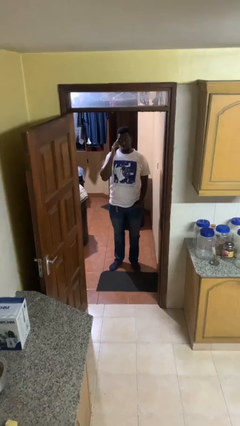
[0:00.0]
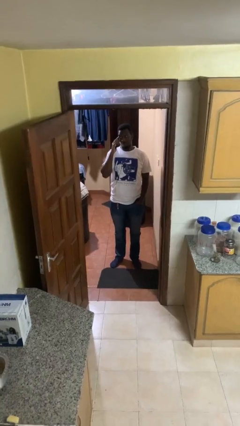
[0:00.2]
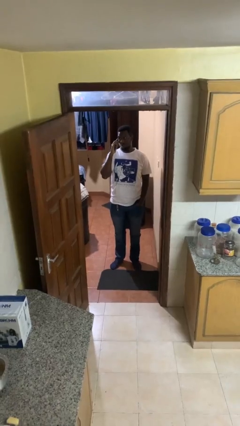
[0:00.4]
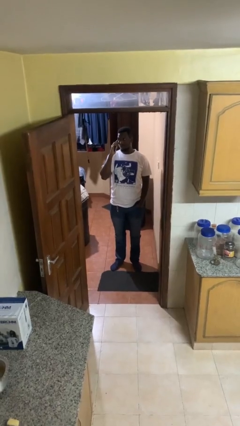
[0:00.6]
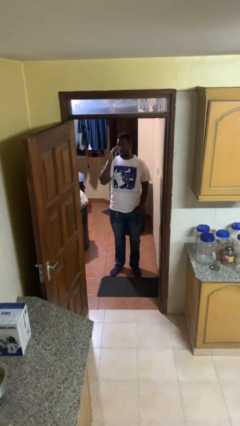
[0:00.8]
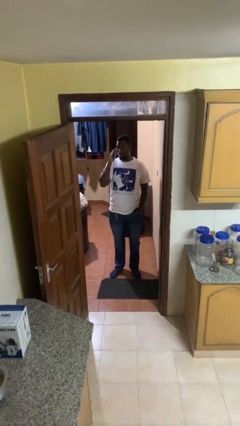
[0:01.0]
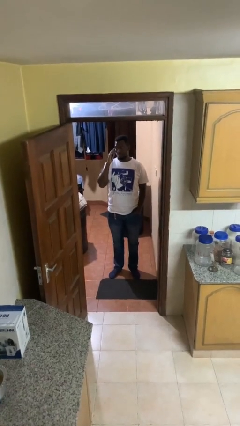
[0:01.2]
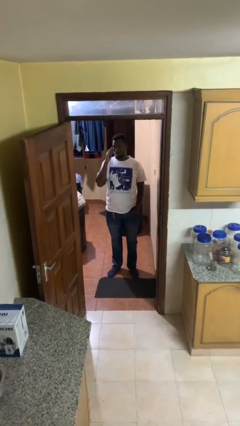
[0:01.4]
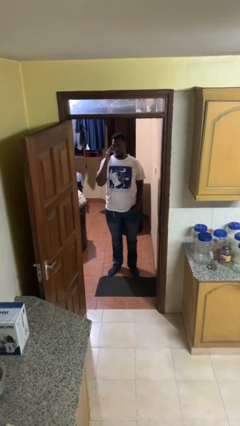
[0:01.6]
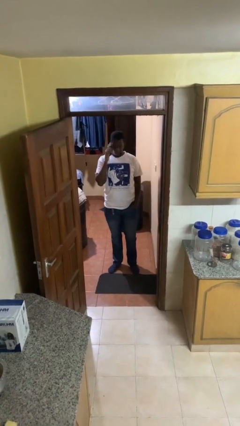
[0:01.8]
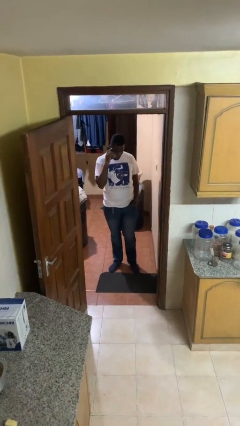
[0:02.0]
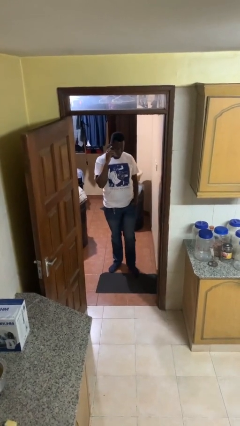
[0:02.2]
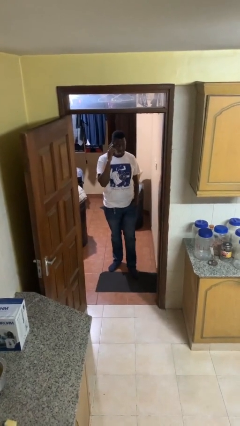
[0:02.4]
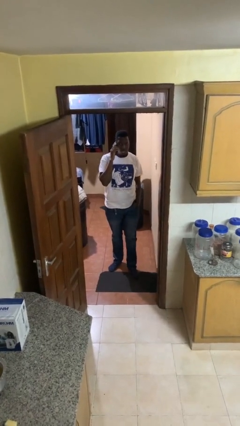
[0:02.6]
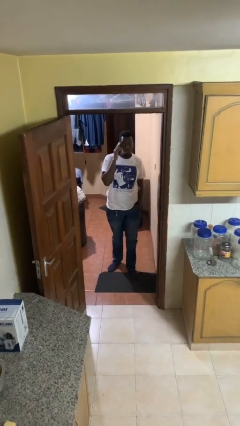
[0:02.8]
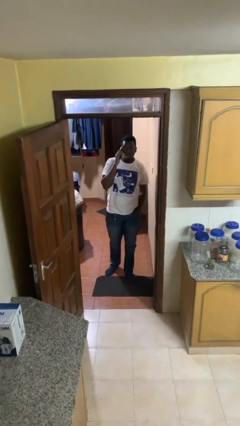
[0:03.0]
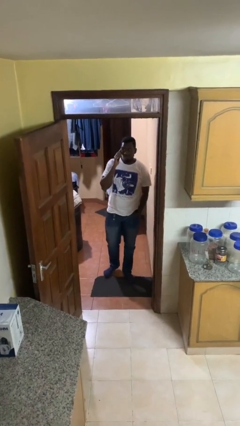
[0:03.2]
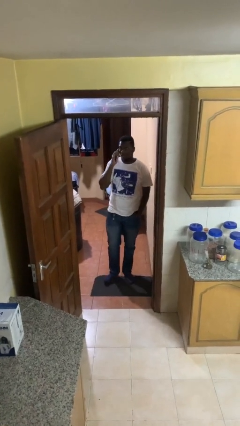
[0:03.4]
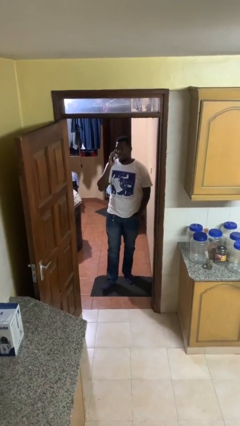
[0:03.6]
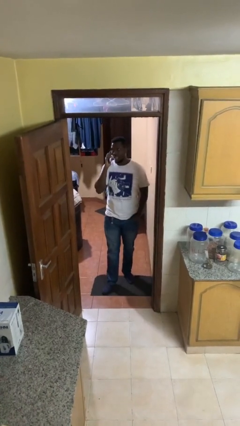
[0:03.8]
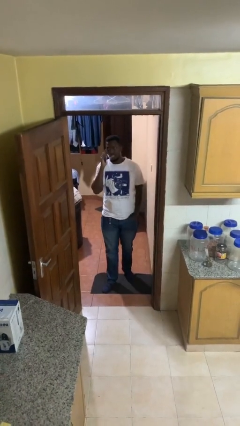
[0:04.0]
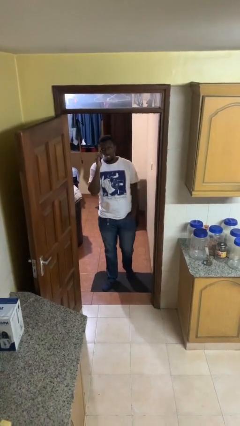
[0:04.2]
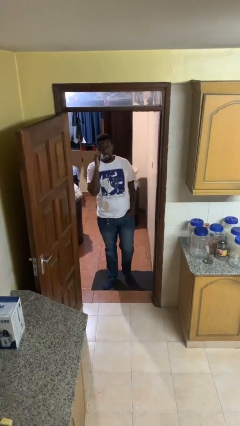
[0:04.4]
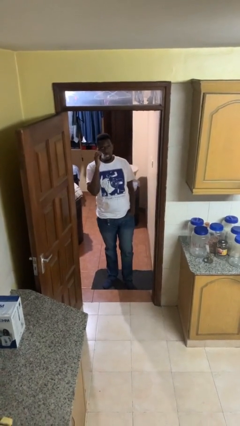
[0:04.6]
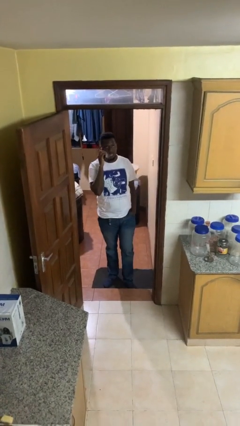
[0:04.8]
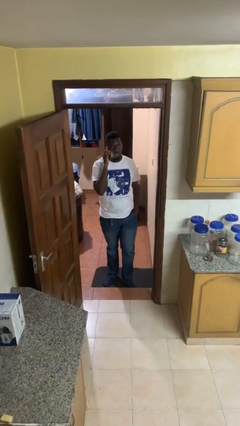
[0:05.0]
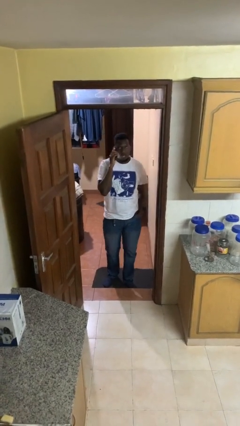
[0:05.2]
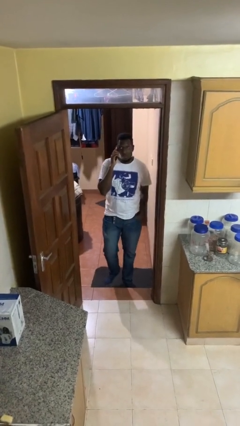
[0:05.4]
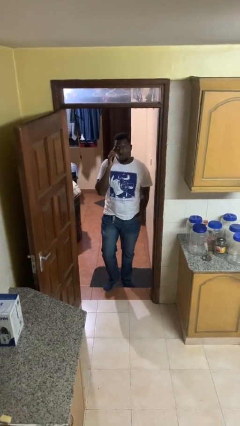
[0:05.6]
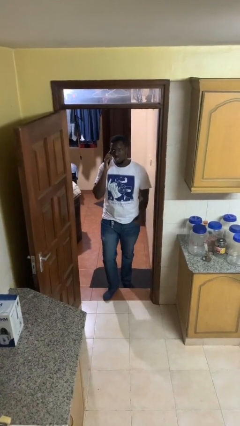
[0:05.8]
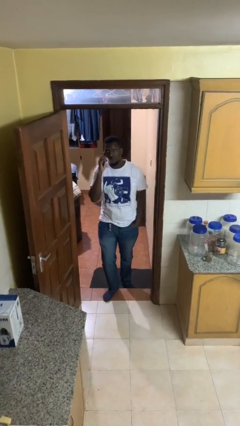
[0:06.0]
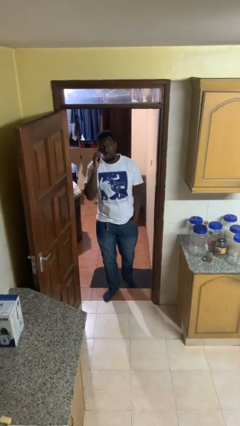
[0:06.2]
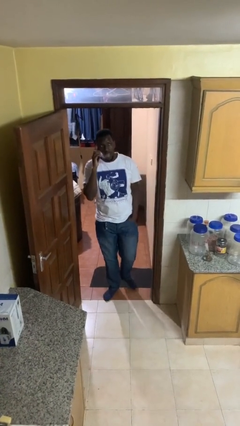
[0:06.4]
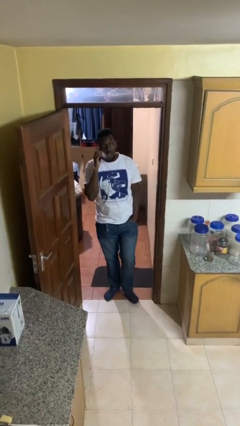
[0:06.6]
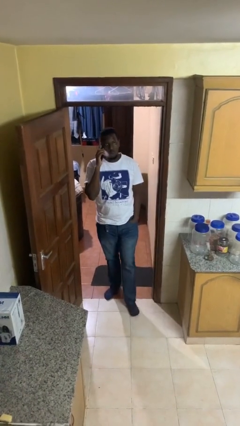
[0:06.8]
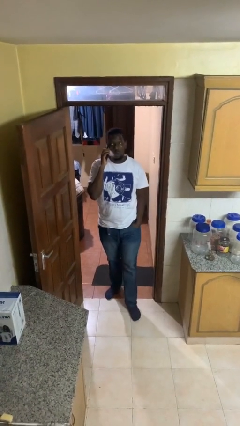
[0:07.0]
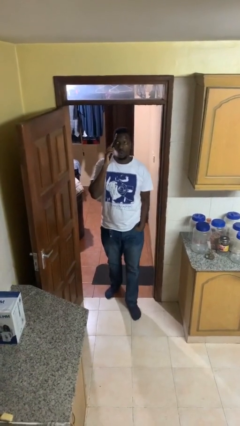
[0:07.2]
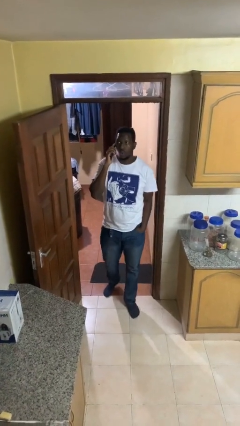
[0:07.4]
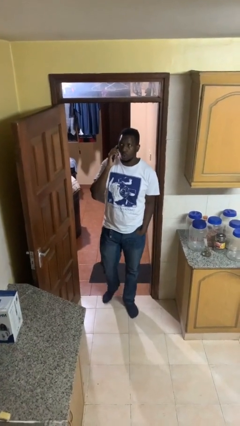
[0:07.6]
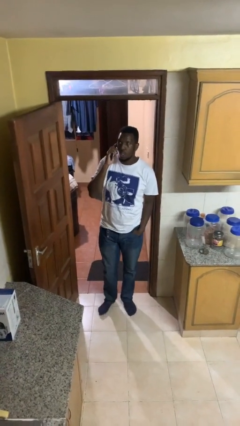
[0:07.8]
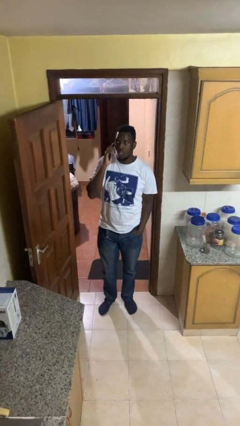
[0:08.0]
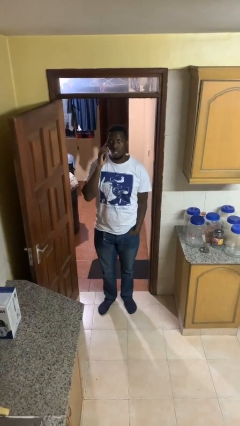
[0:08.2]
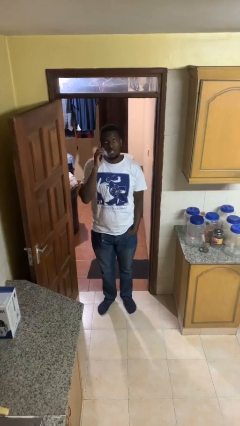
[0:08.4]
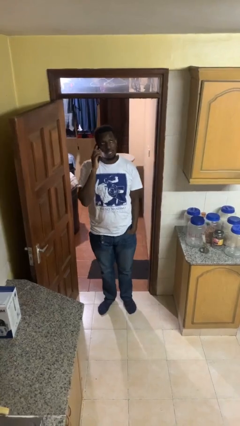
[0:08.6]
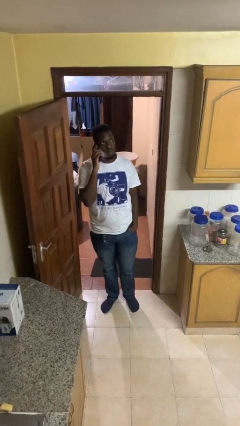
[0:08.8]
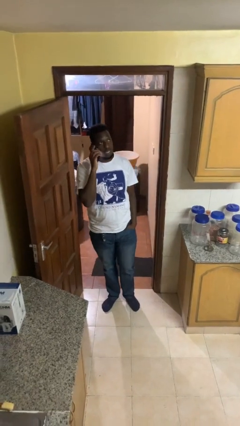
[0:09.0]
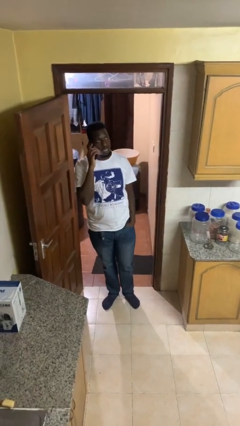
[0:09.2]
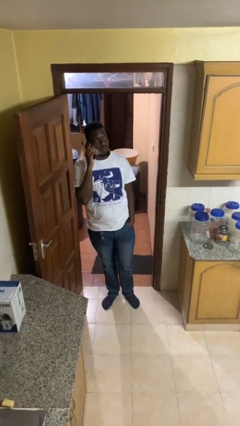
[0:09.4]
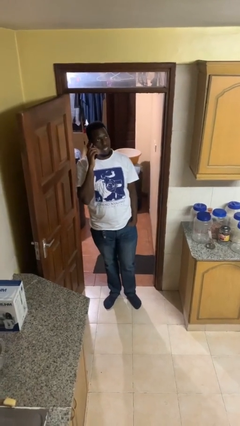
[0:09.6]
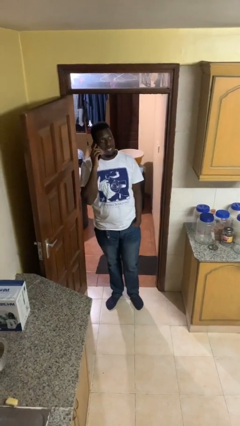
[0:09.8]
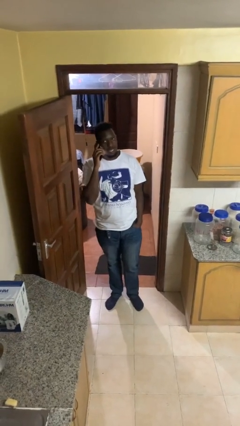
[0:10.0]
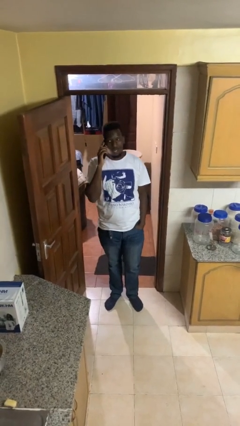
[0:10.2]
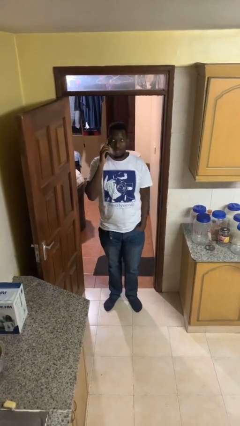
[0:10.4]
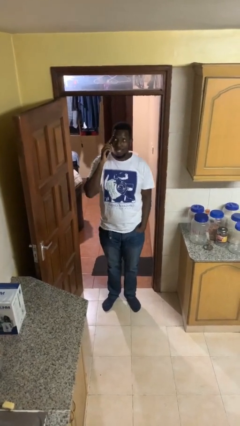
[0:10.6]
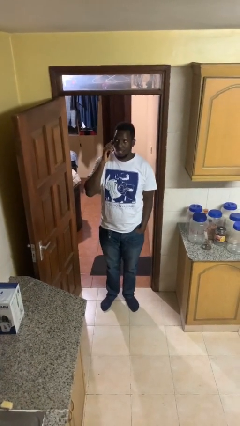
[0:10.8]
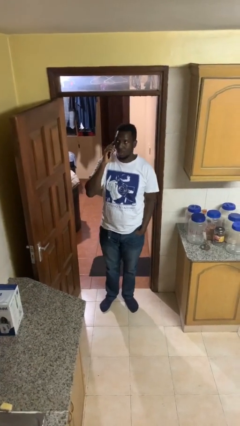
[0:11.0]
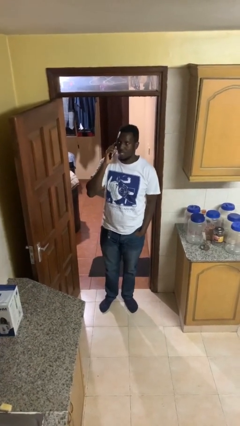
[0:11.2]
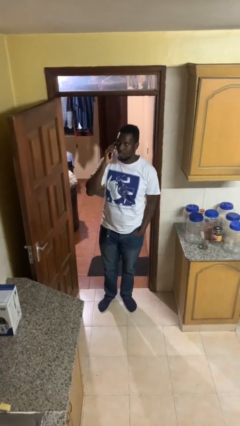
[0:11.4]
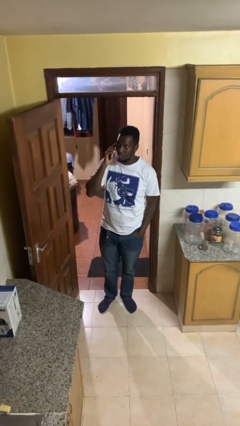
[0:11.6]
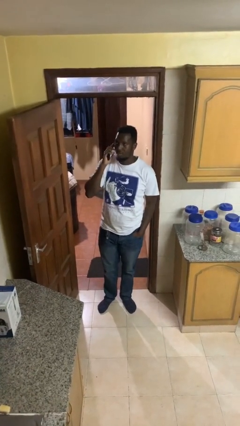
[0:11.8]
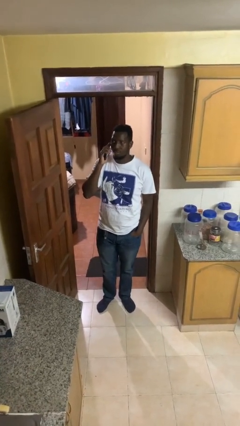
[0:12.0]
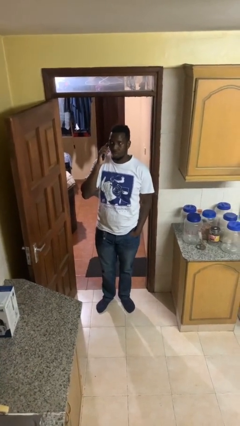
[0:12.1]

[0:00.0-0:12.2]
person enters scene through structure

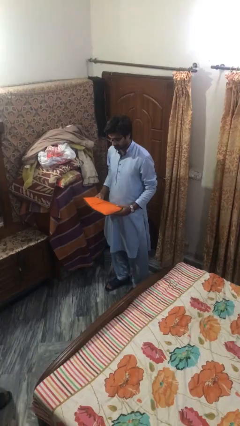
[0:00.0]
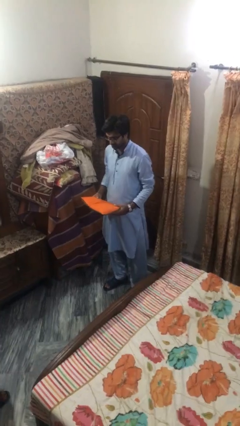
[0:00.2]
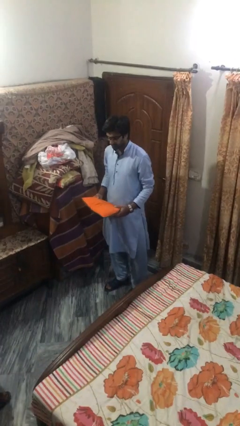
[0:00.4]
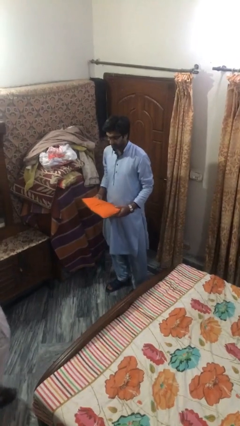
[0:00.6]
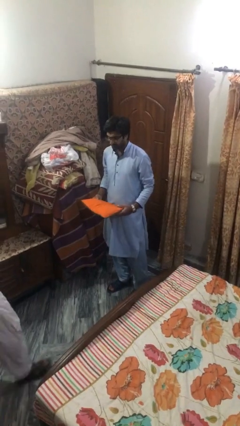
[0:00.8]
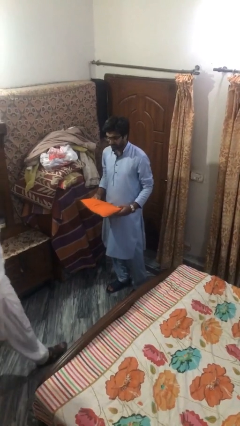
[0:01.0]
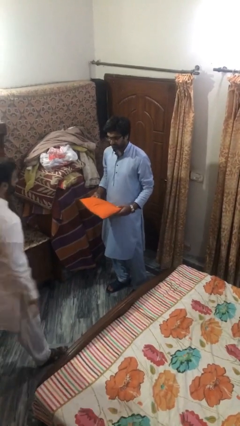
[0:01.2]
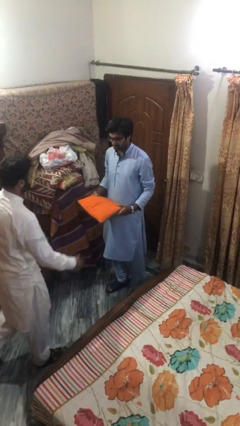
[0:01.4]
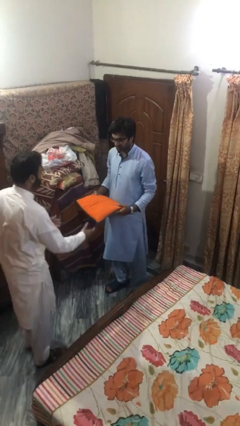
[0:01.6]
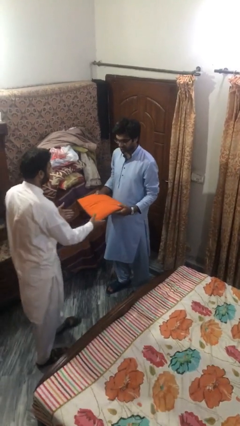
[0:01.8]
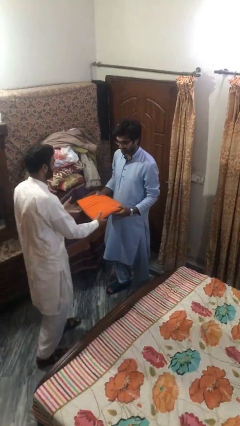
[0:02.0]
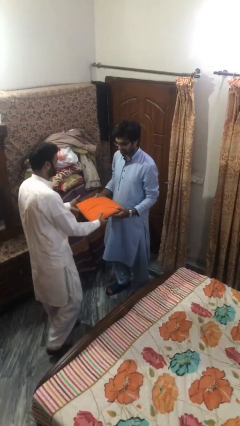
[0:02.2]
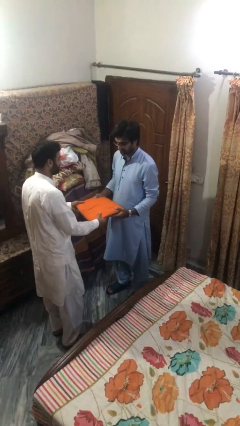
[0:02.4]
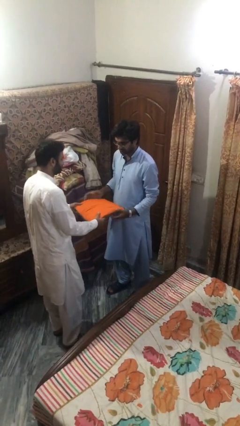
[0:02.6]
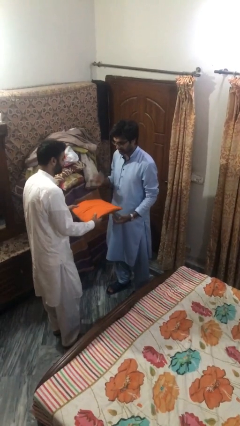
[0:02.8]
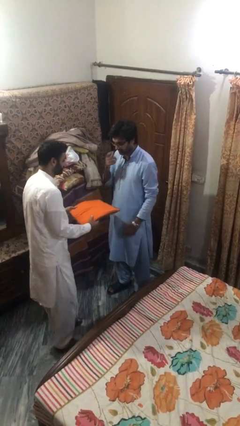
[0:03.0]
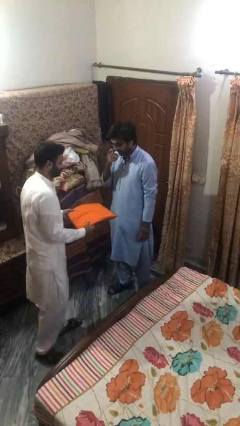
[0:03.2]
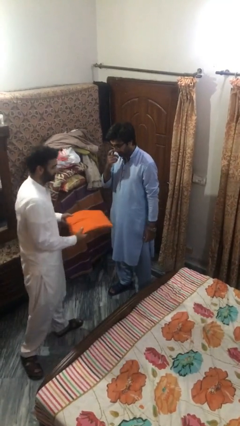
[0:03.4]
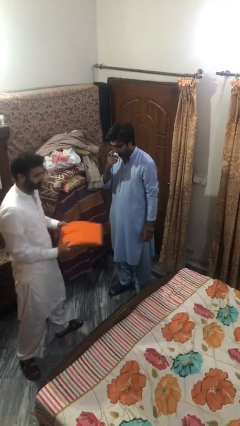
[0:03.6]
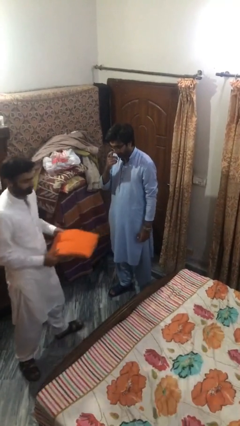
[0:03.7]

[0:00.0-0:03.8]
person transfers object to person

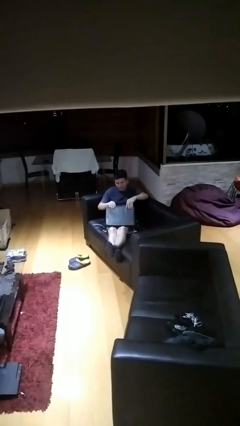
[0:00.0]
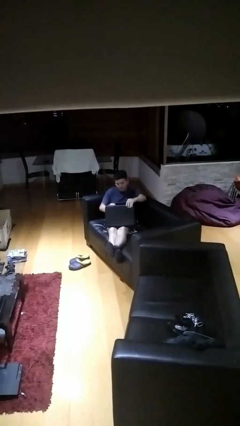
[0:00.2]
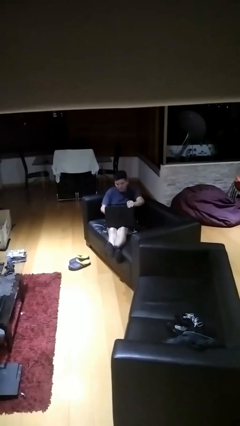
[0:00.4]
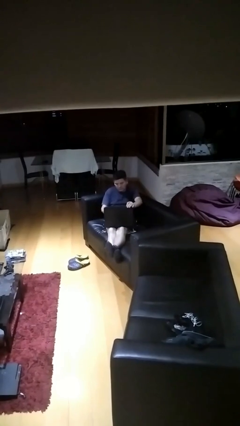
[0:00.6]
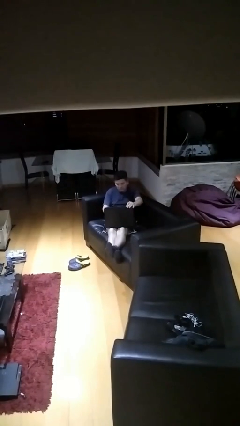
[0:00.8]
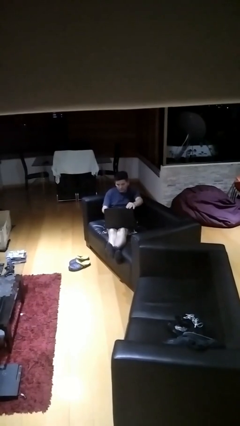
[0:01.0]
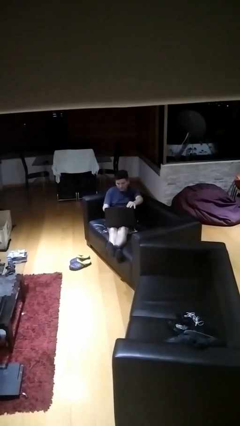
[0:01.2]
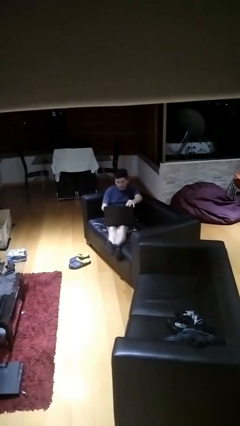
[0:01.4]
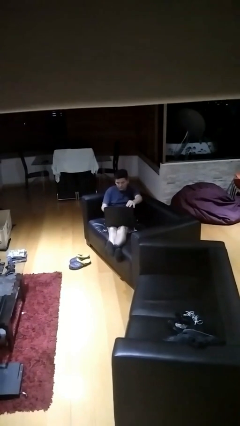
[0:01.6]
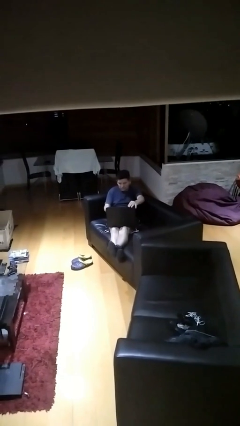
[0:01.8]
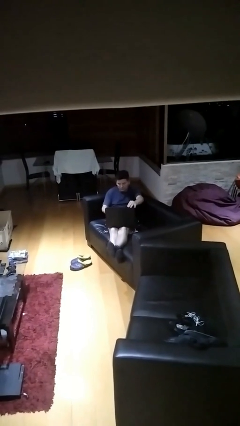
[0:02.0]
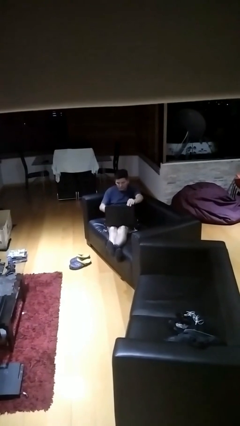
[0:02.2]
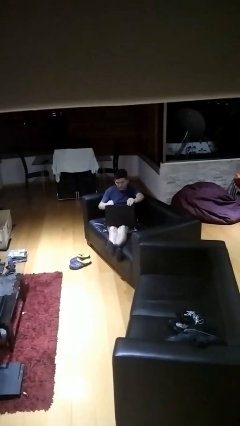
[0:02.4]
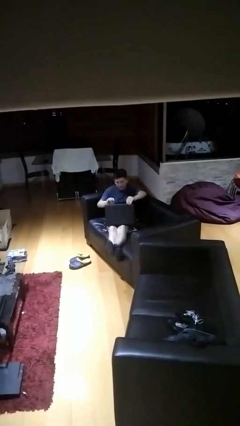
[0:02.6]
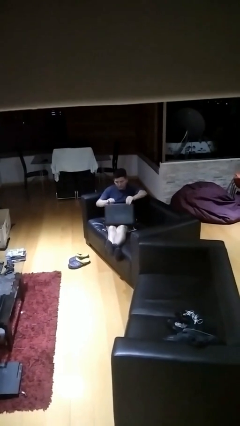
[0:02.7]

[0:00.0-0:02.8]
person interacts with laptop
